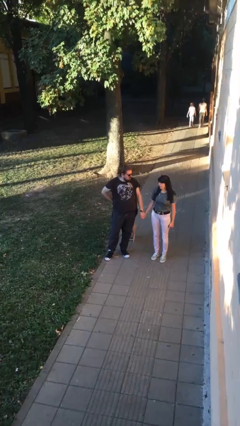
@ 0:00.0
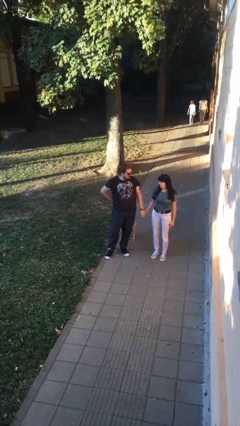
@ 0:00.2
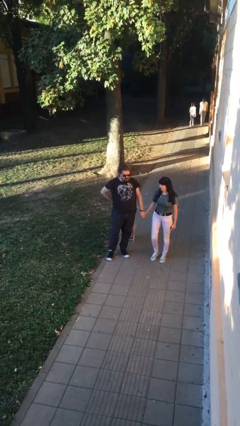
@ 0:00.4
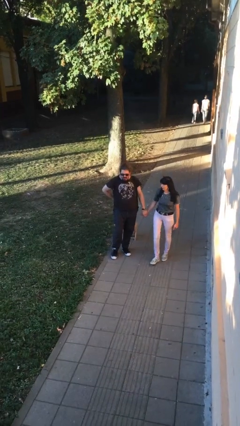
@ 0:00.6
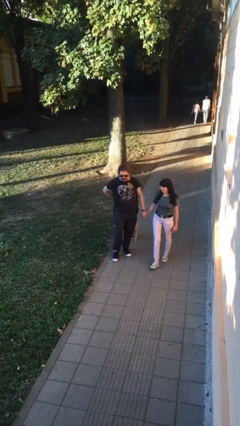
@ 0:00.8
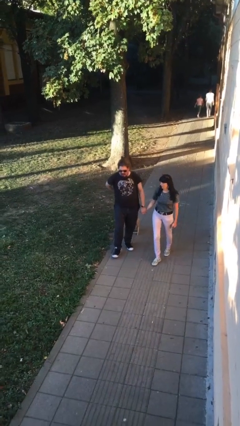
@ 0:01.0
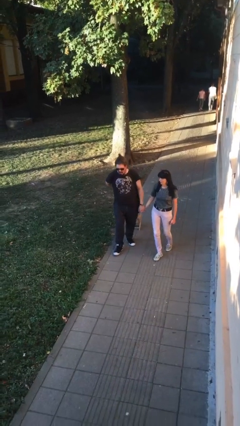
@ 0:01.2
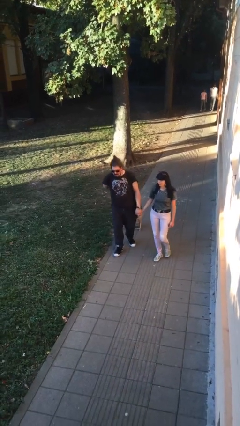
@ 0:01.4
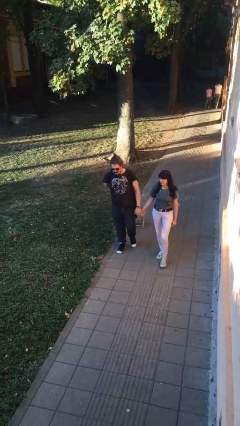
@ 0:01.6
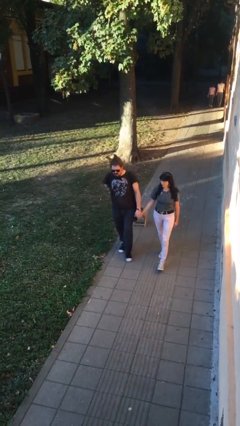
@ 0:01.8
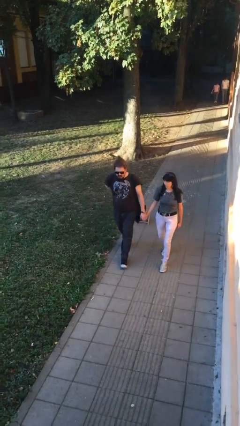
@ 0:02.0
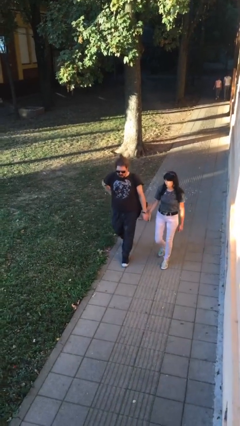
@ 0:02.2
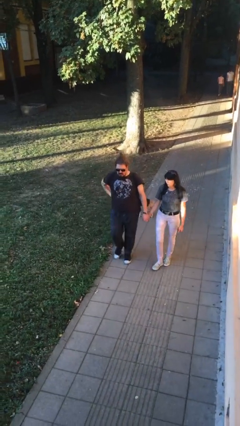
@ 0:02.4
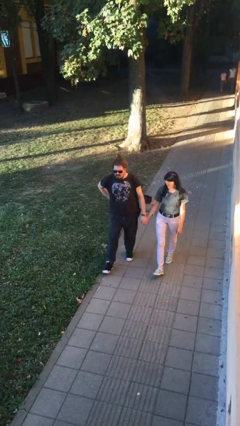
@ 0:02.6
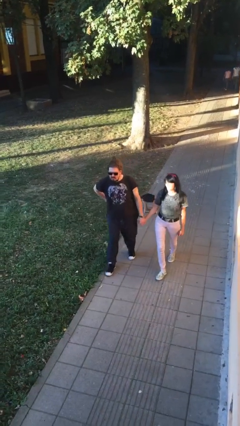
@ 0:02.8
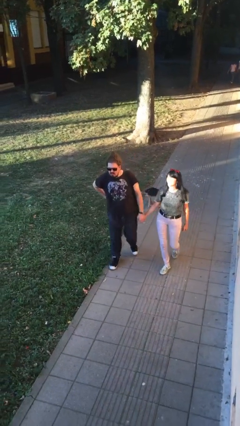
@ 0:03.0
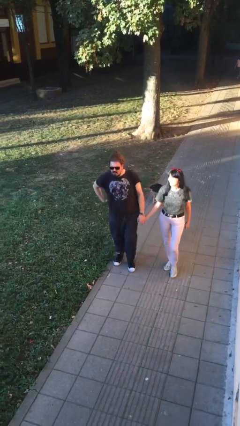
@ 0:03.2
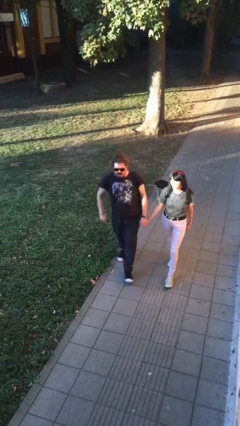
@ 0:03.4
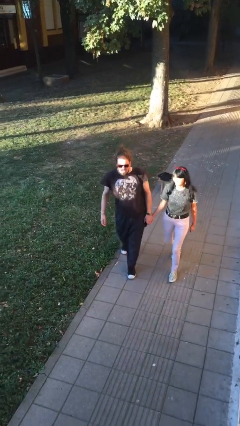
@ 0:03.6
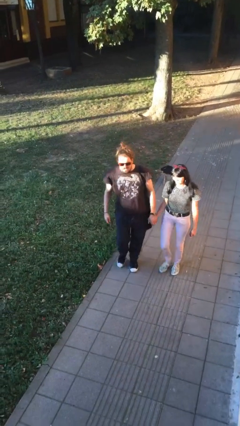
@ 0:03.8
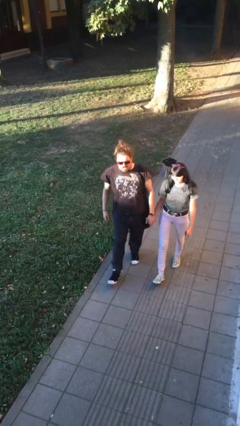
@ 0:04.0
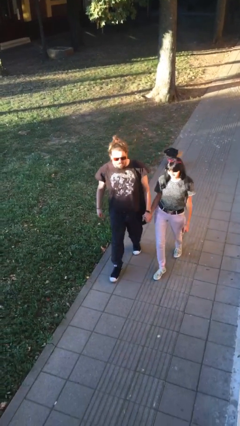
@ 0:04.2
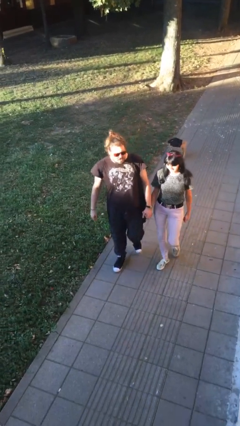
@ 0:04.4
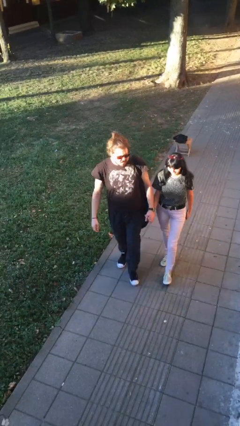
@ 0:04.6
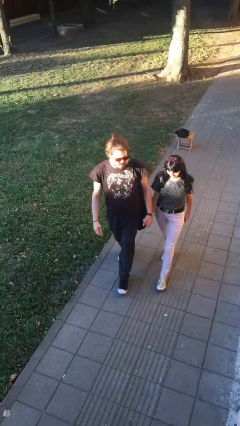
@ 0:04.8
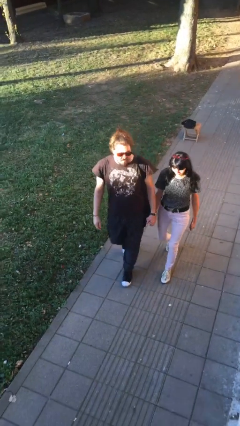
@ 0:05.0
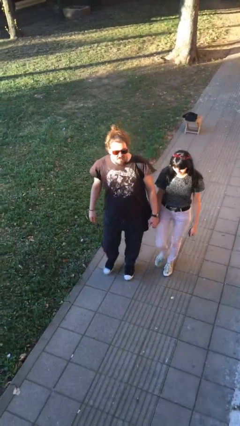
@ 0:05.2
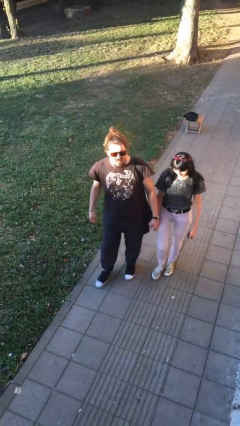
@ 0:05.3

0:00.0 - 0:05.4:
person holds hand

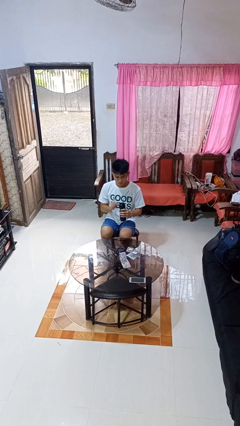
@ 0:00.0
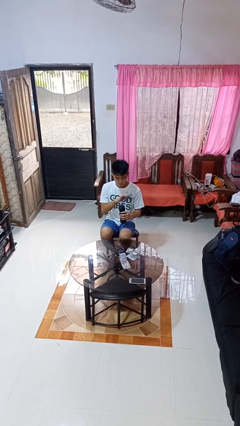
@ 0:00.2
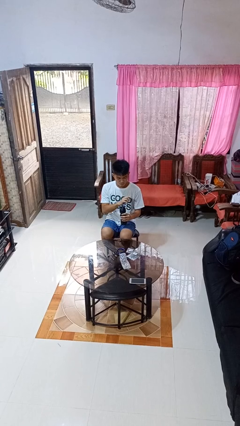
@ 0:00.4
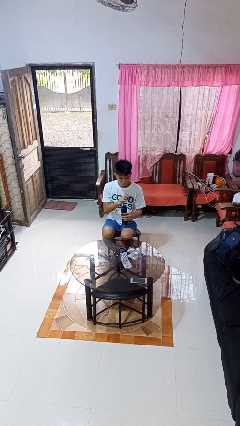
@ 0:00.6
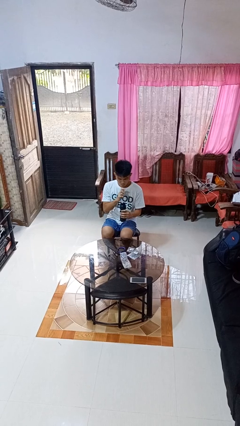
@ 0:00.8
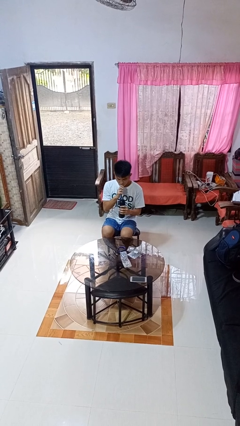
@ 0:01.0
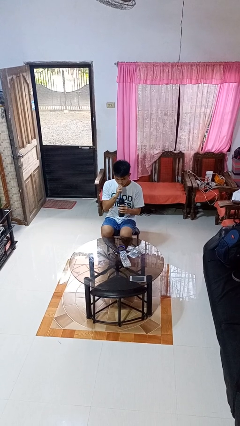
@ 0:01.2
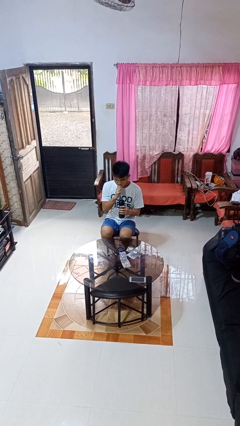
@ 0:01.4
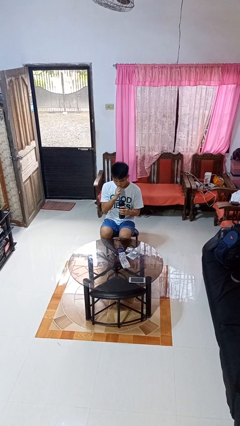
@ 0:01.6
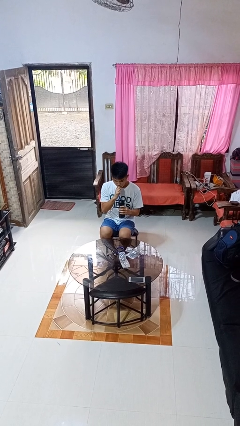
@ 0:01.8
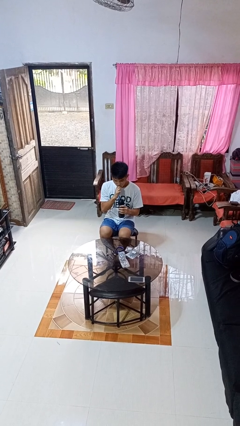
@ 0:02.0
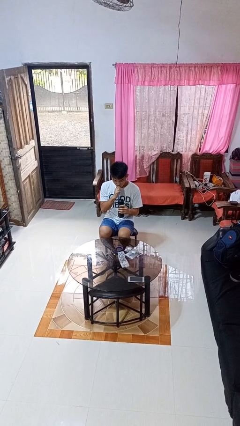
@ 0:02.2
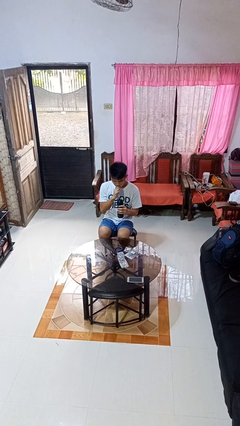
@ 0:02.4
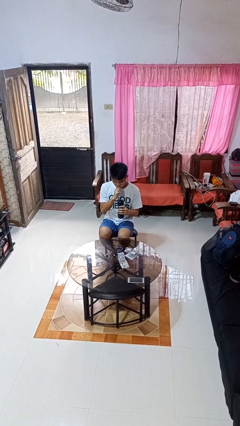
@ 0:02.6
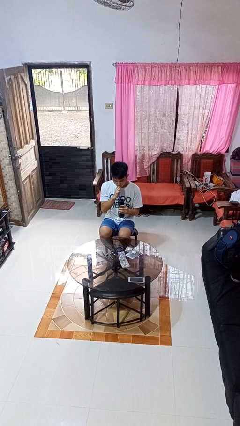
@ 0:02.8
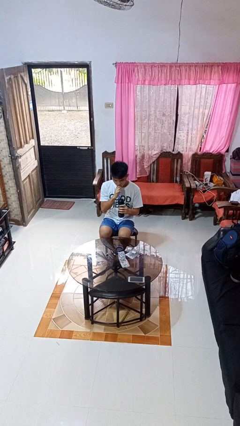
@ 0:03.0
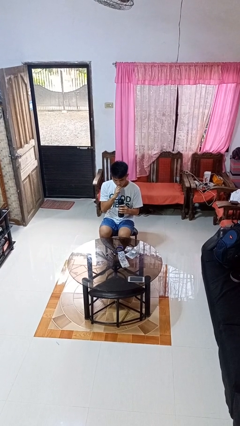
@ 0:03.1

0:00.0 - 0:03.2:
person drinks from straw

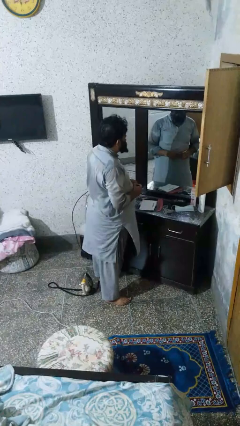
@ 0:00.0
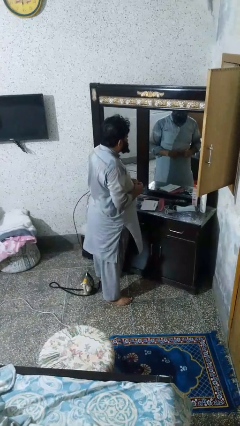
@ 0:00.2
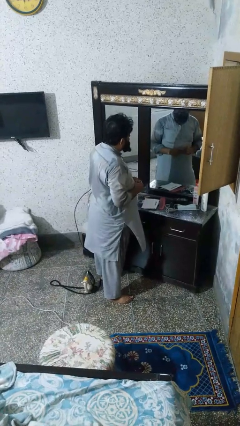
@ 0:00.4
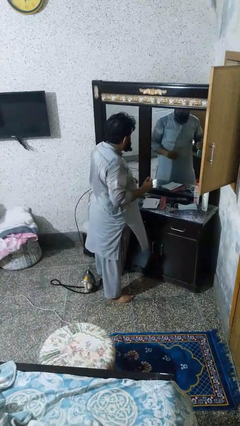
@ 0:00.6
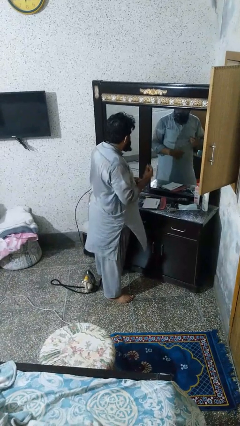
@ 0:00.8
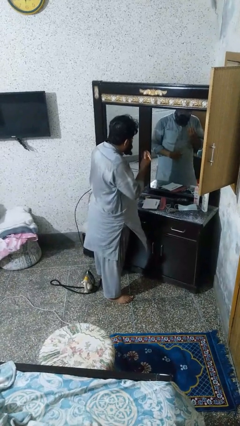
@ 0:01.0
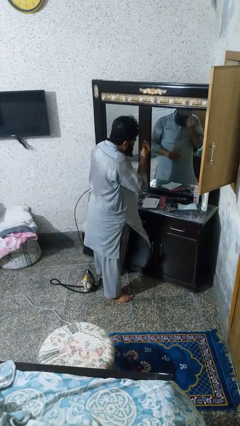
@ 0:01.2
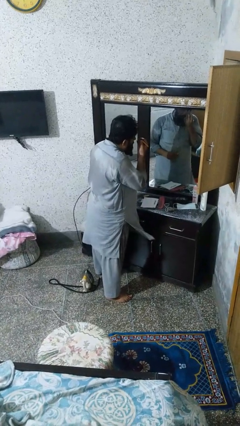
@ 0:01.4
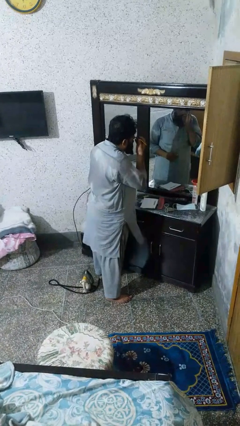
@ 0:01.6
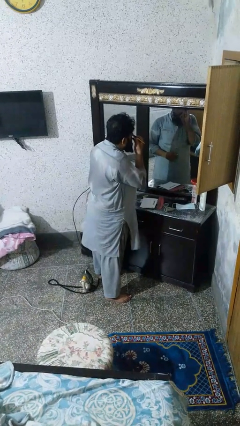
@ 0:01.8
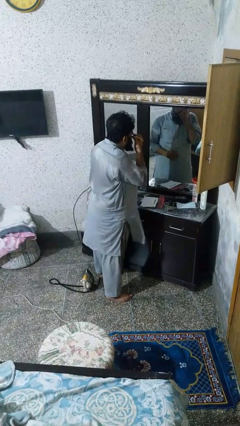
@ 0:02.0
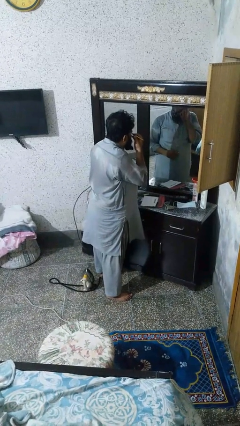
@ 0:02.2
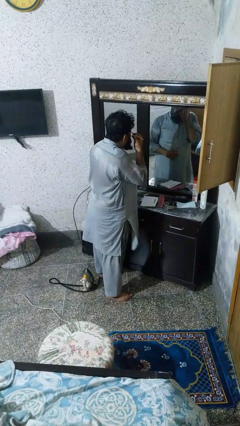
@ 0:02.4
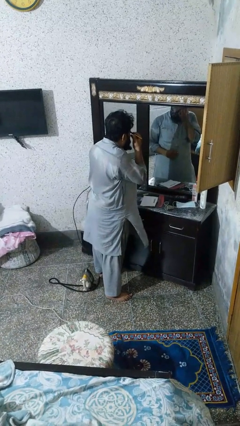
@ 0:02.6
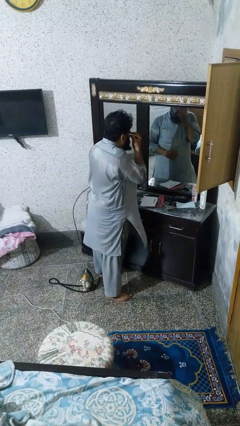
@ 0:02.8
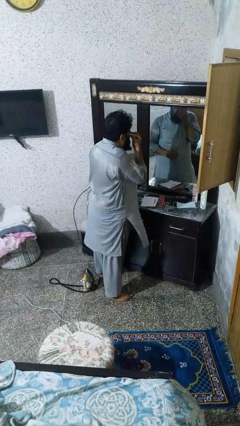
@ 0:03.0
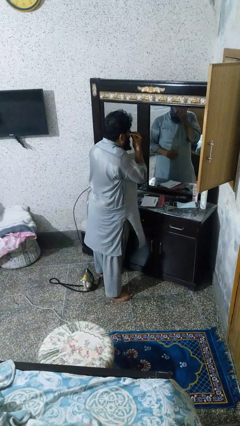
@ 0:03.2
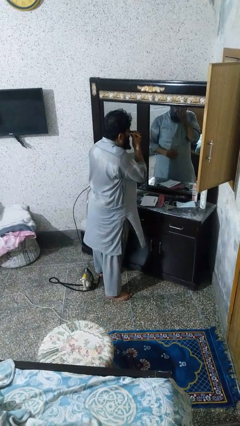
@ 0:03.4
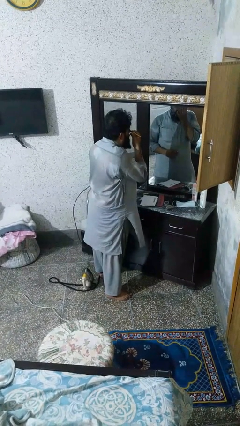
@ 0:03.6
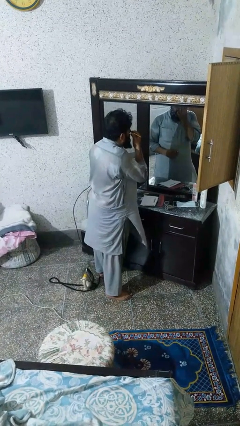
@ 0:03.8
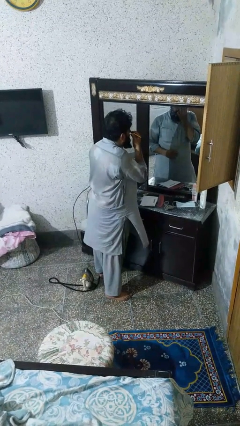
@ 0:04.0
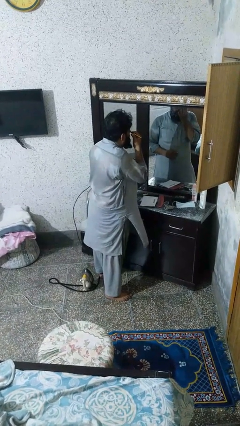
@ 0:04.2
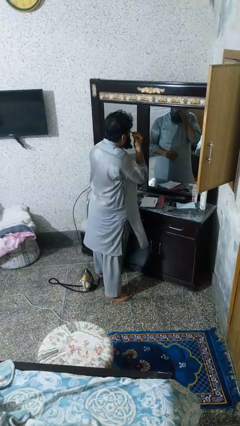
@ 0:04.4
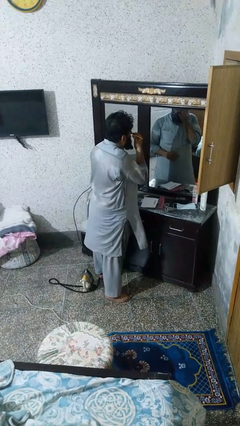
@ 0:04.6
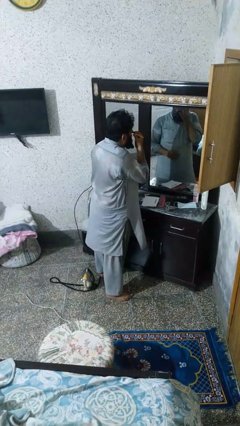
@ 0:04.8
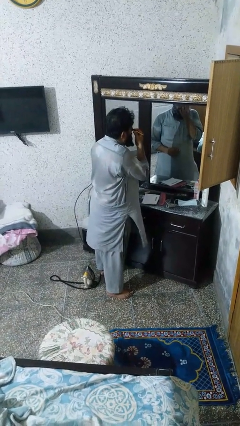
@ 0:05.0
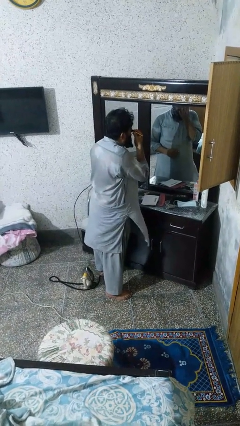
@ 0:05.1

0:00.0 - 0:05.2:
person applies eye makeup

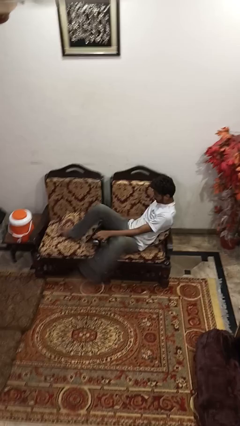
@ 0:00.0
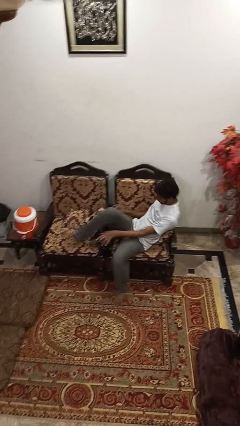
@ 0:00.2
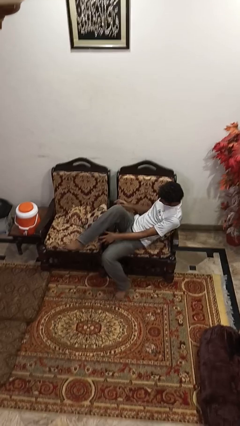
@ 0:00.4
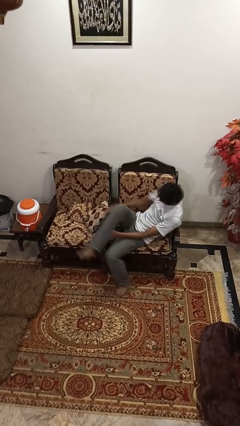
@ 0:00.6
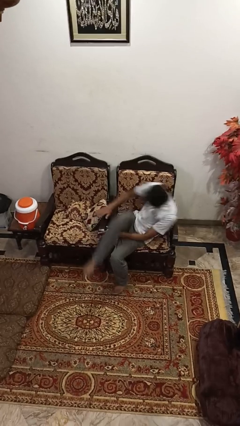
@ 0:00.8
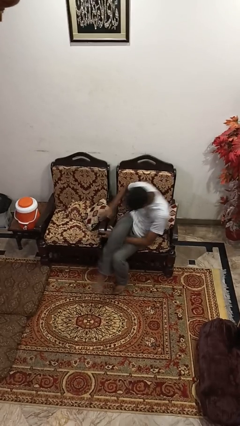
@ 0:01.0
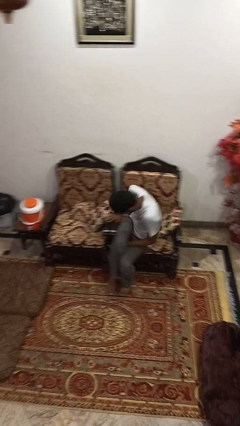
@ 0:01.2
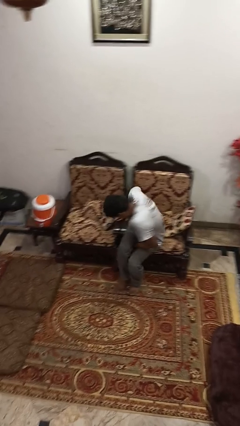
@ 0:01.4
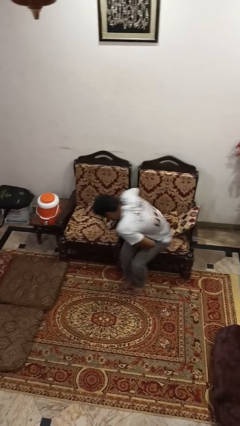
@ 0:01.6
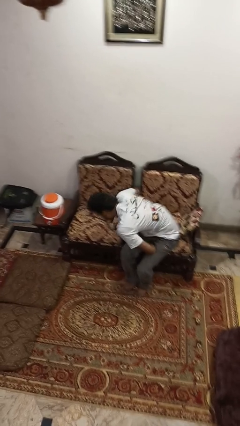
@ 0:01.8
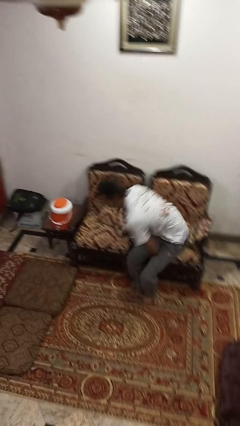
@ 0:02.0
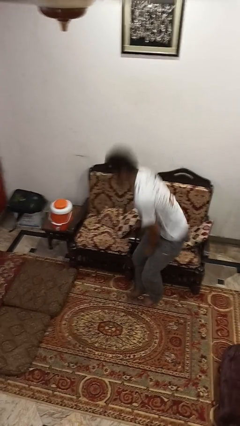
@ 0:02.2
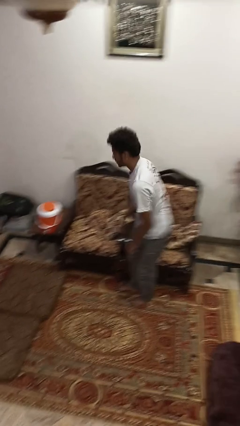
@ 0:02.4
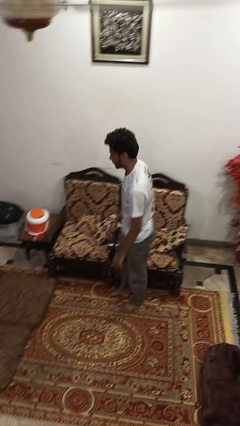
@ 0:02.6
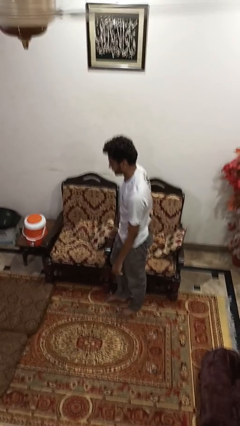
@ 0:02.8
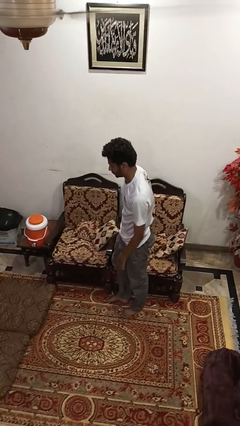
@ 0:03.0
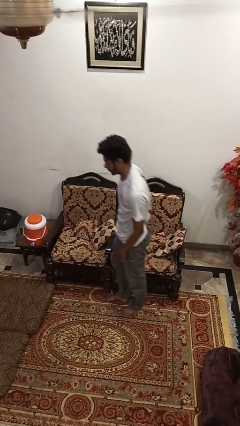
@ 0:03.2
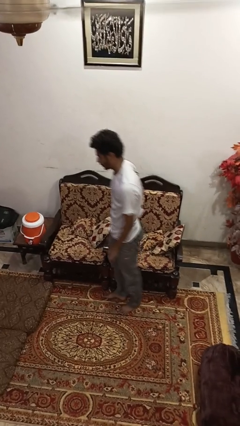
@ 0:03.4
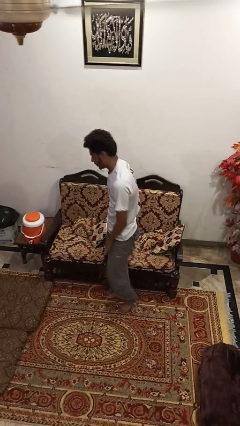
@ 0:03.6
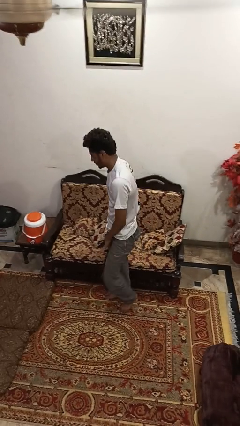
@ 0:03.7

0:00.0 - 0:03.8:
person stands up
